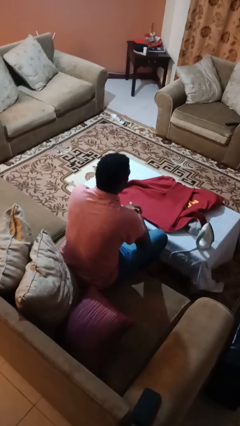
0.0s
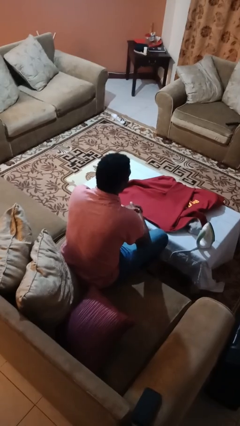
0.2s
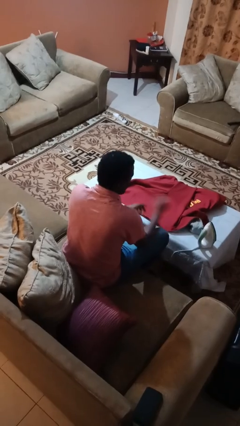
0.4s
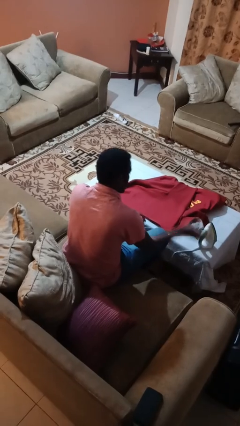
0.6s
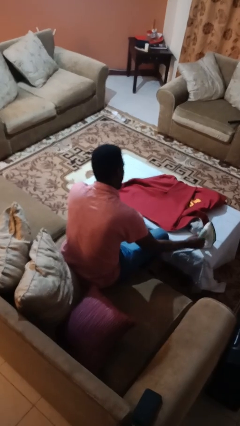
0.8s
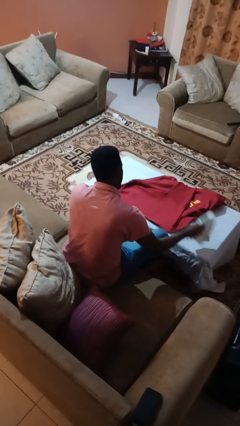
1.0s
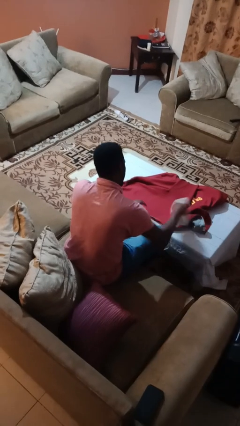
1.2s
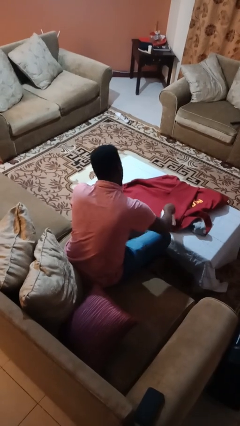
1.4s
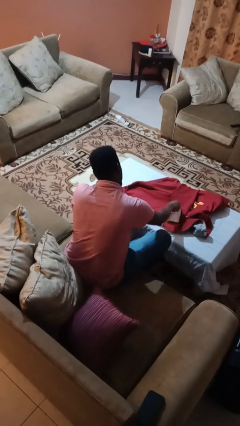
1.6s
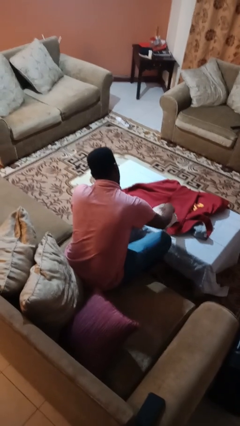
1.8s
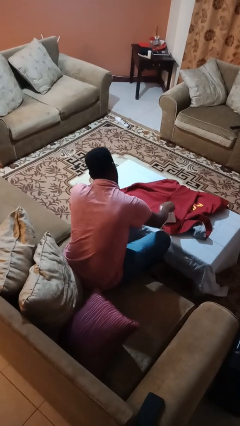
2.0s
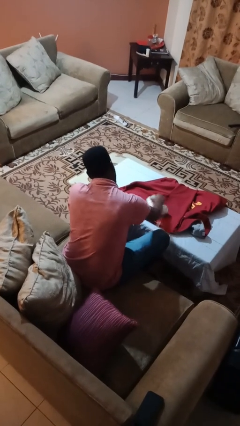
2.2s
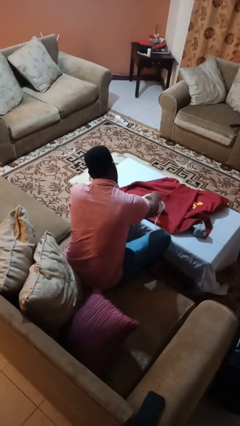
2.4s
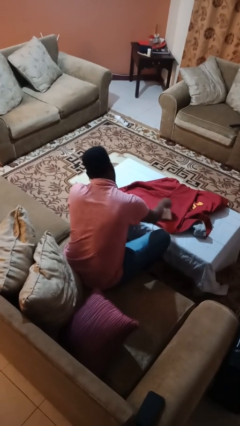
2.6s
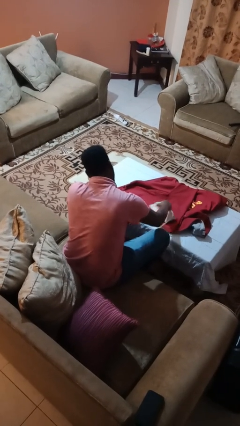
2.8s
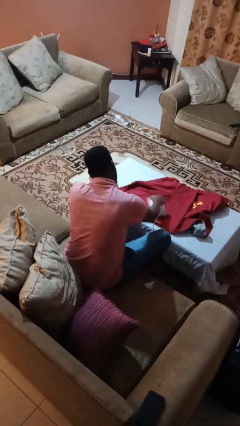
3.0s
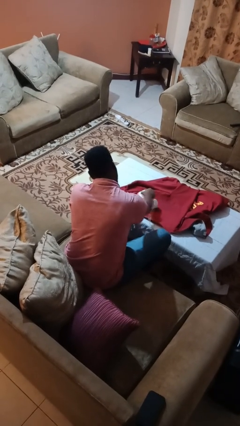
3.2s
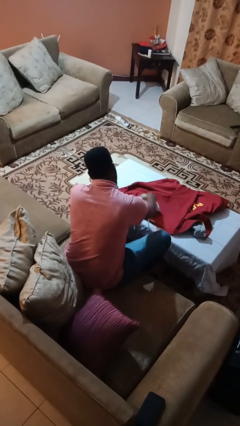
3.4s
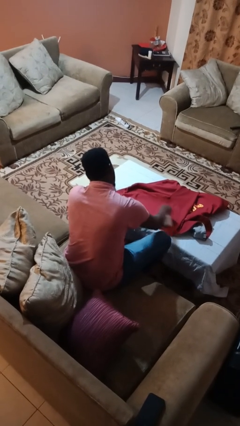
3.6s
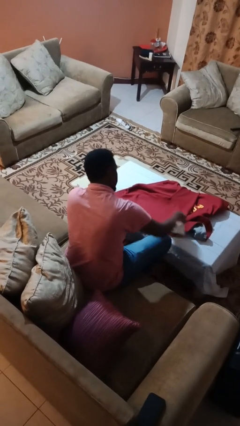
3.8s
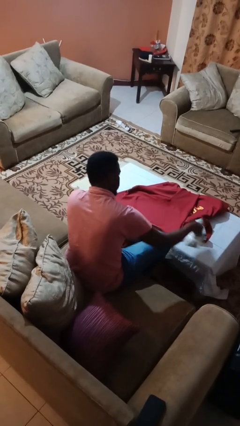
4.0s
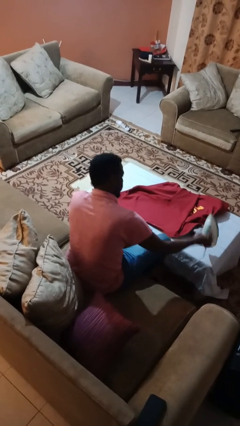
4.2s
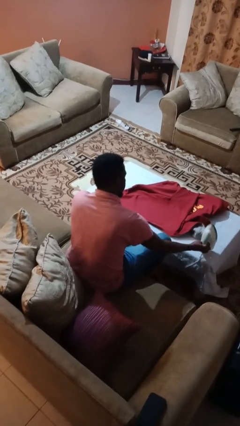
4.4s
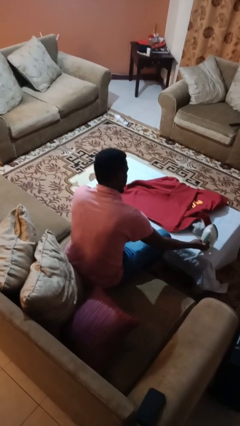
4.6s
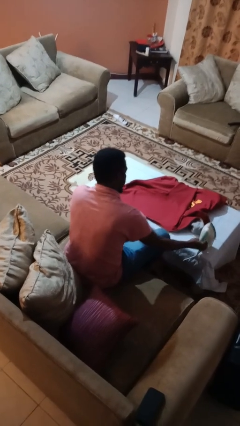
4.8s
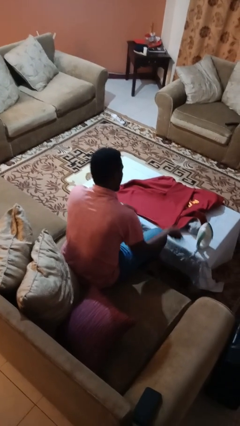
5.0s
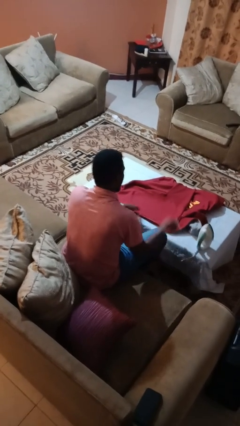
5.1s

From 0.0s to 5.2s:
person irons clothes

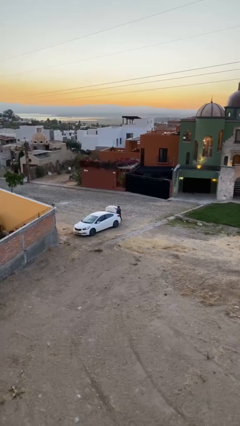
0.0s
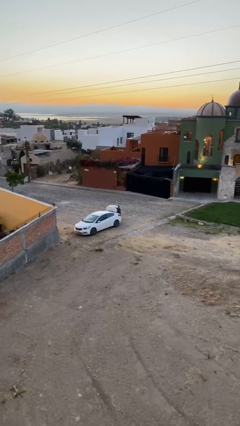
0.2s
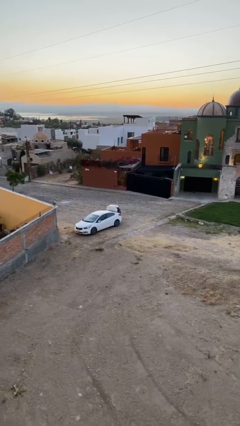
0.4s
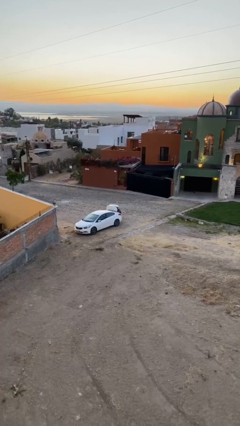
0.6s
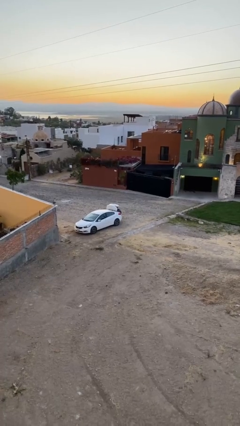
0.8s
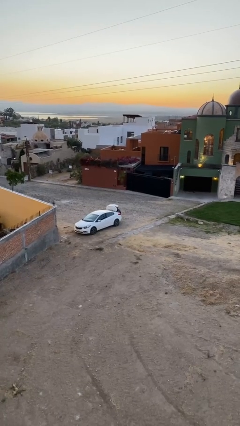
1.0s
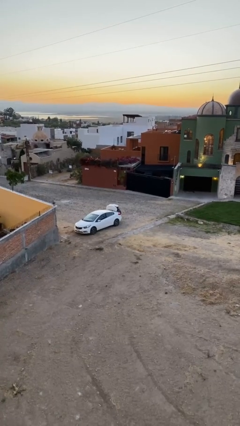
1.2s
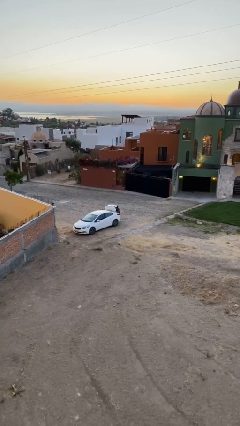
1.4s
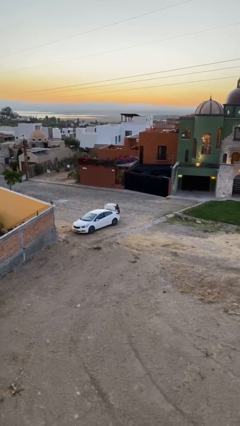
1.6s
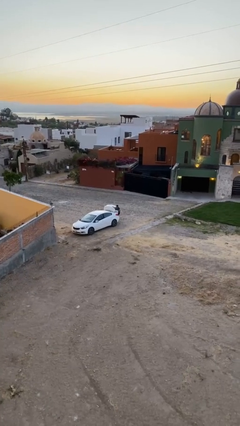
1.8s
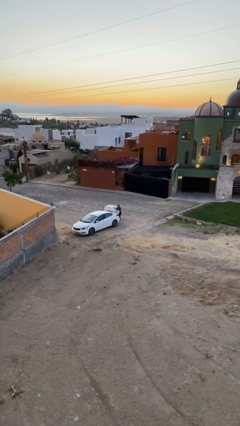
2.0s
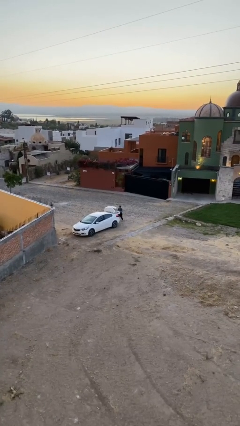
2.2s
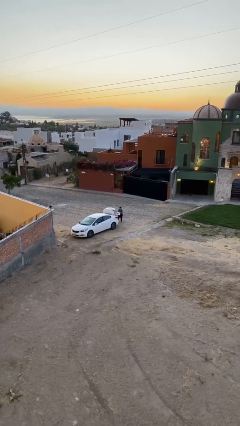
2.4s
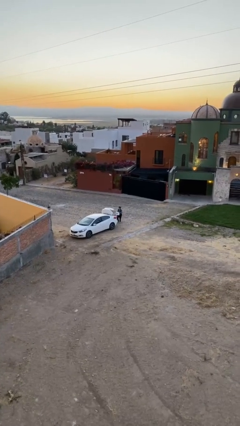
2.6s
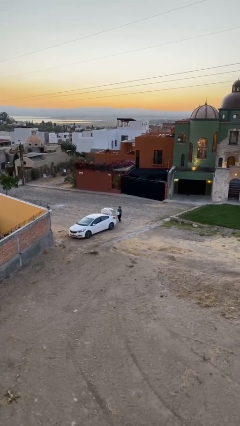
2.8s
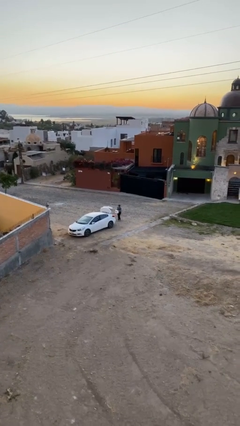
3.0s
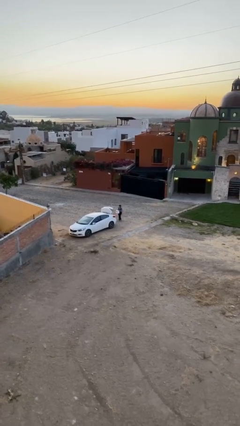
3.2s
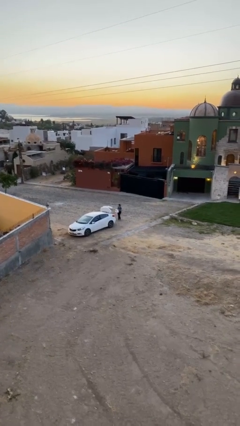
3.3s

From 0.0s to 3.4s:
person unloads car

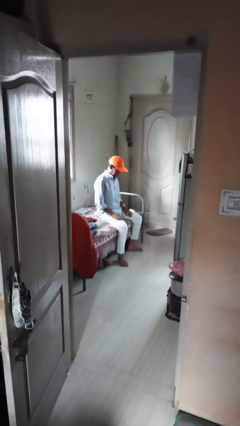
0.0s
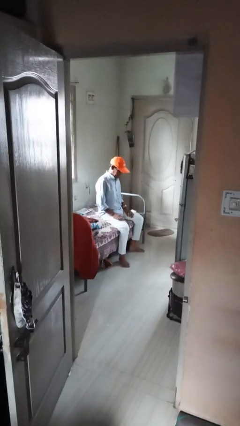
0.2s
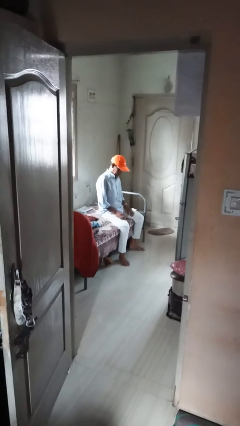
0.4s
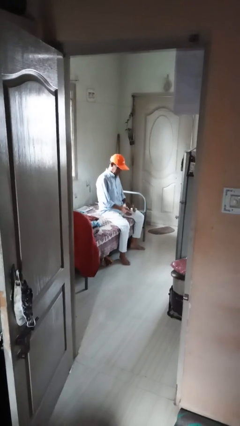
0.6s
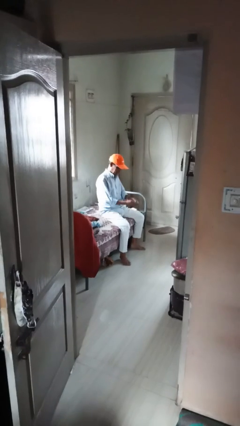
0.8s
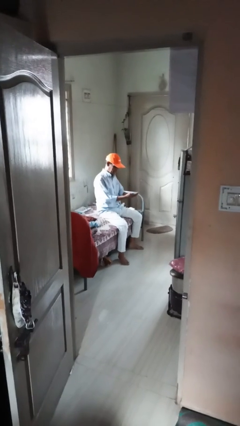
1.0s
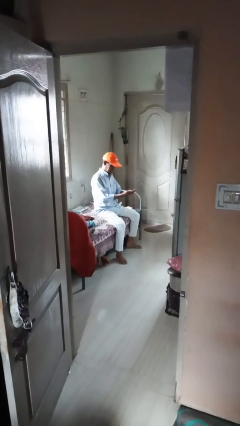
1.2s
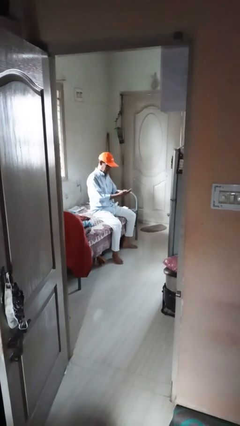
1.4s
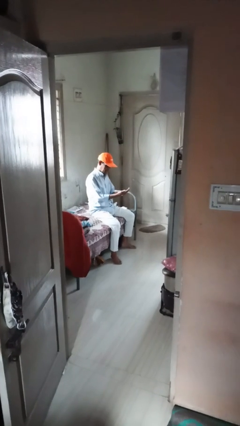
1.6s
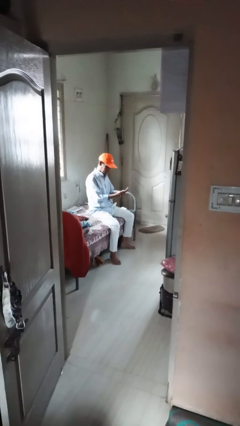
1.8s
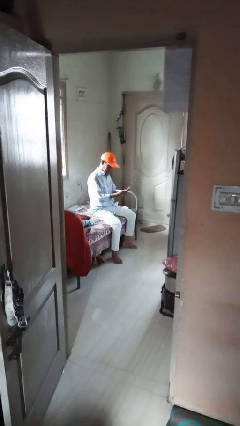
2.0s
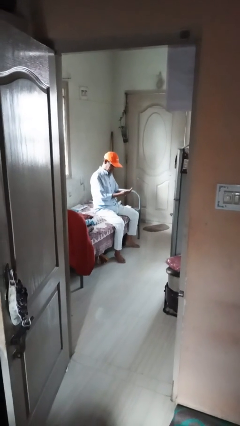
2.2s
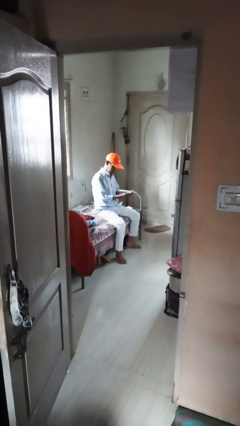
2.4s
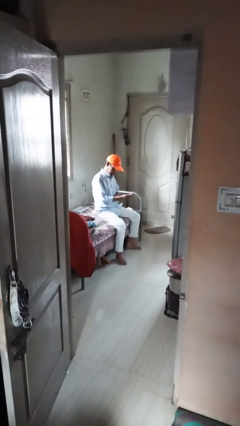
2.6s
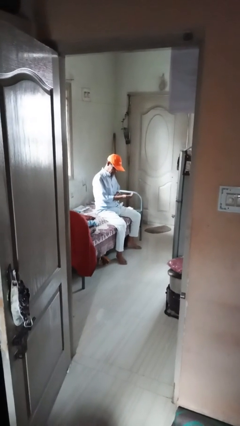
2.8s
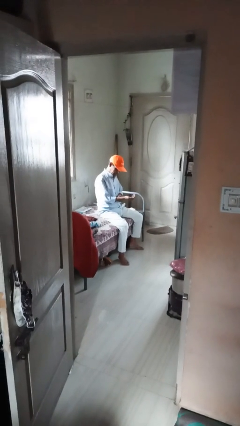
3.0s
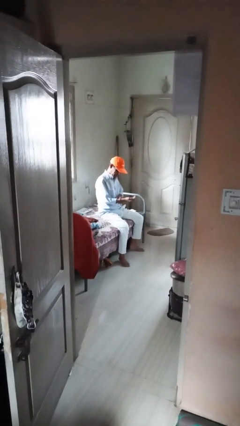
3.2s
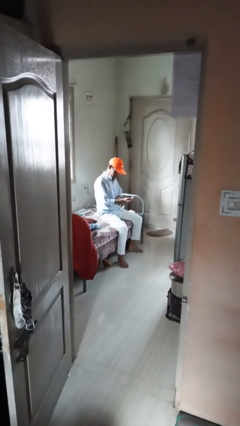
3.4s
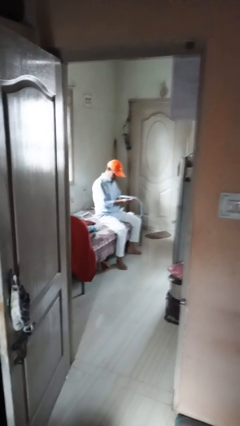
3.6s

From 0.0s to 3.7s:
person looks at hands in lap

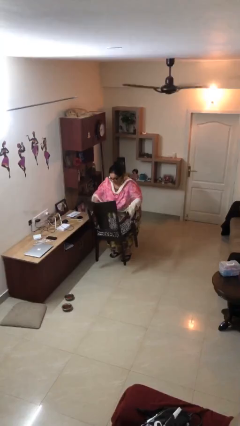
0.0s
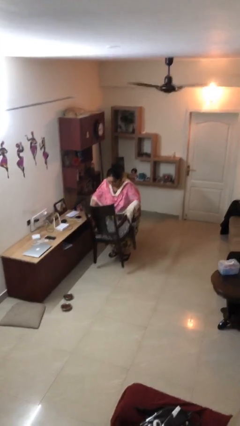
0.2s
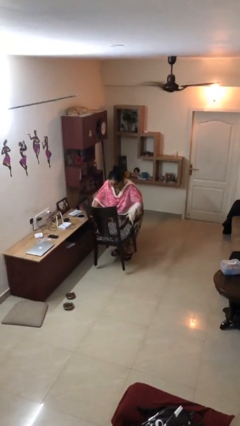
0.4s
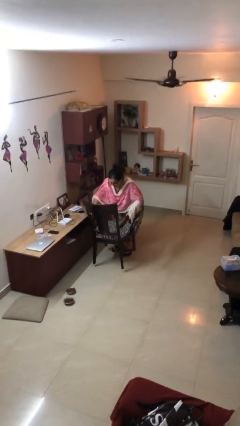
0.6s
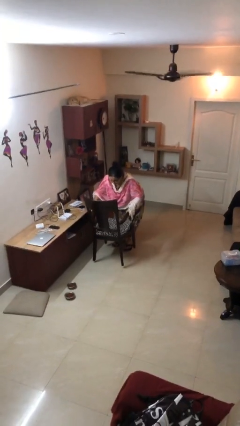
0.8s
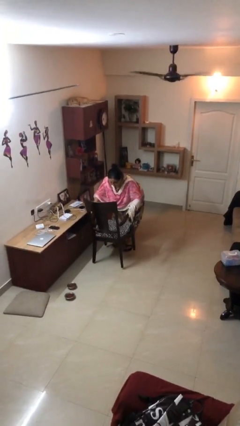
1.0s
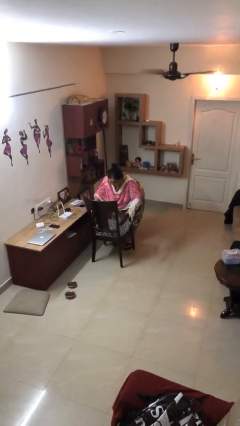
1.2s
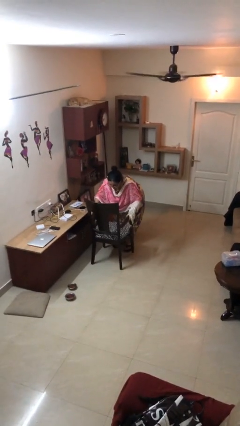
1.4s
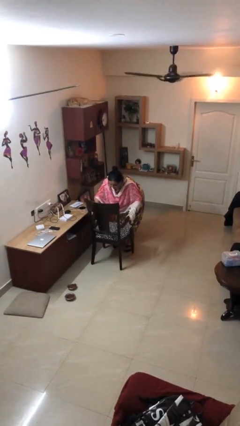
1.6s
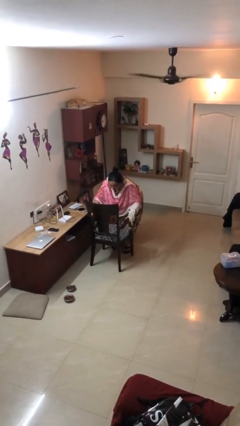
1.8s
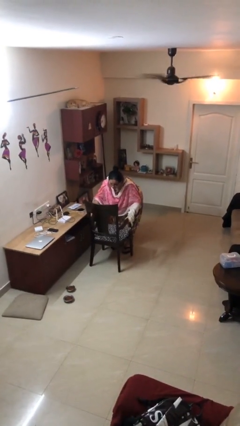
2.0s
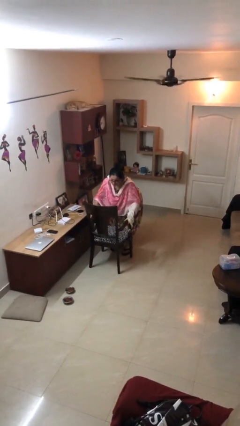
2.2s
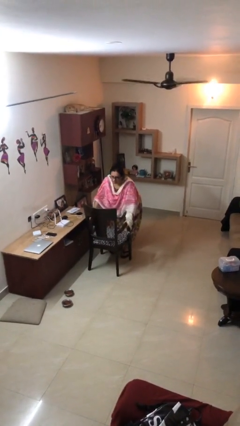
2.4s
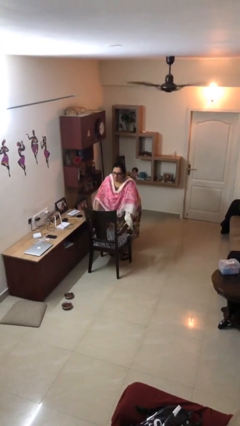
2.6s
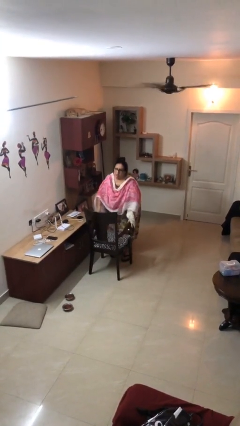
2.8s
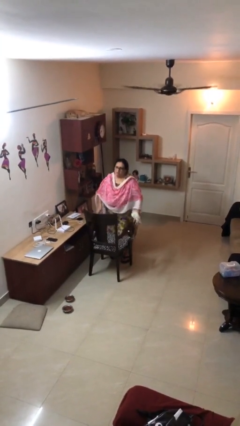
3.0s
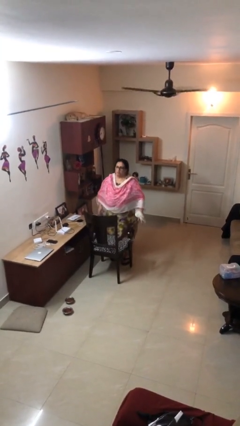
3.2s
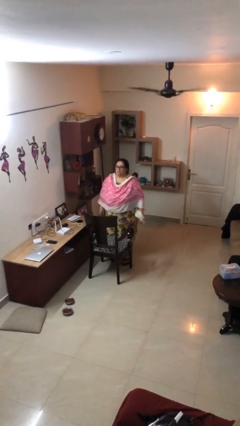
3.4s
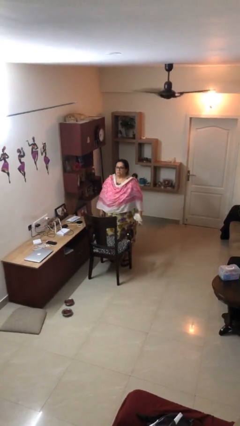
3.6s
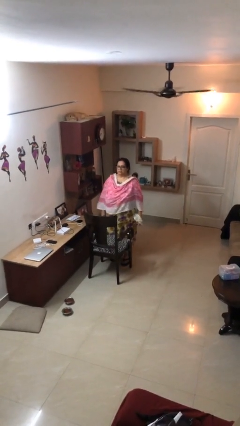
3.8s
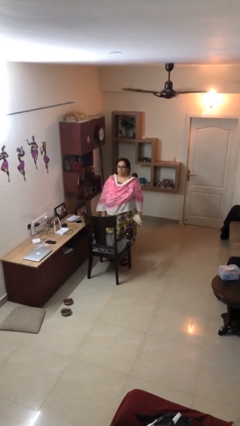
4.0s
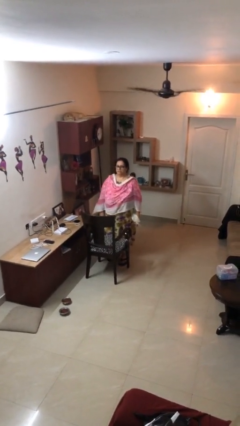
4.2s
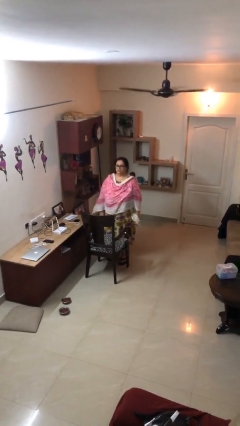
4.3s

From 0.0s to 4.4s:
person puts down object on floor

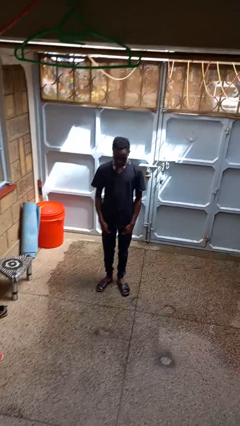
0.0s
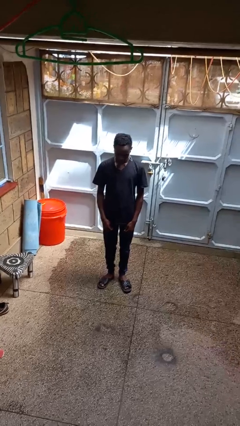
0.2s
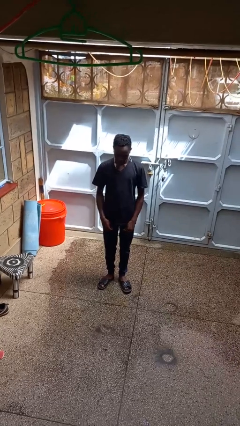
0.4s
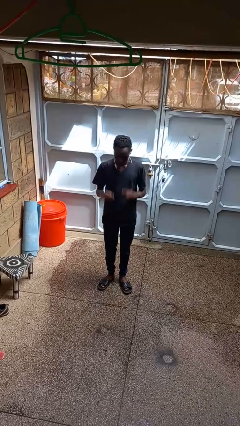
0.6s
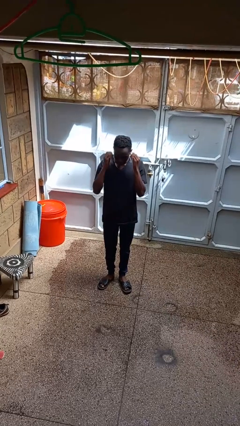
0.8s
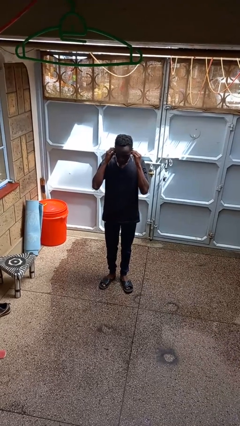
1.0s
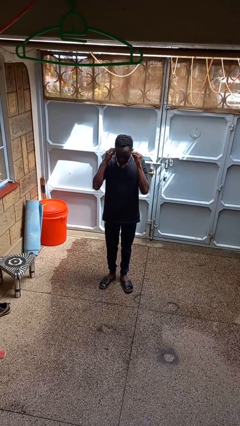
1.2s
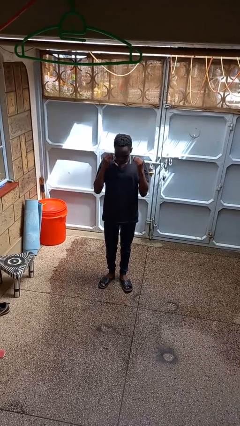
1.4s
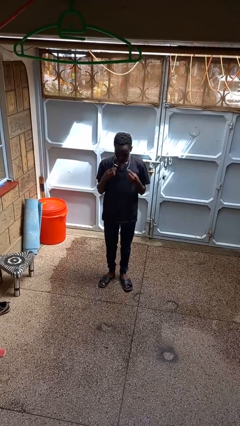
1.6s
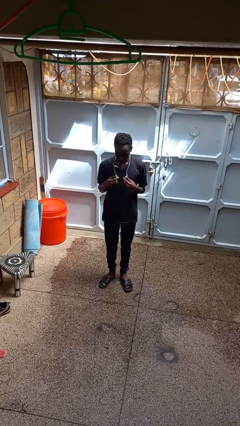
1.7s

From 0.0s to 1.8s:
person takes off headphones
